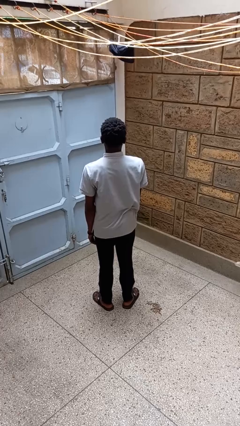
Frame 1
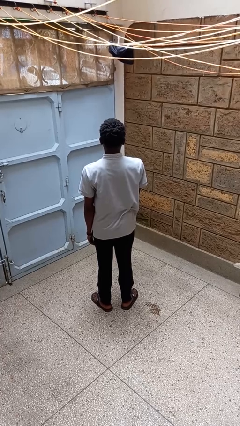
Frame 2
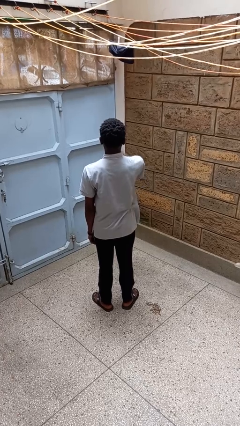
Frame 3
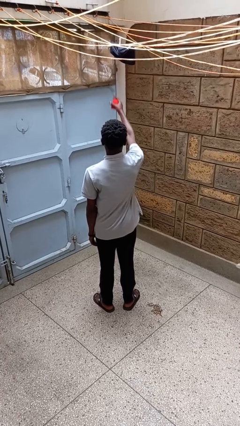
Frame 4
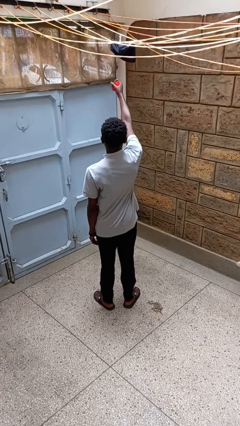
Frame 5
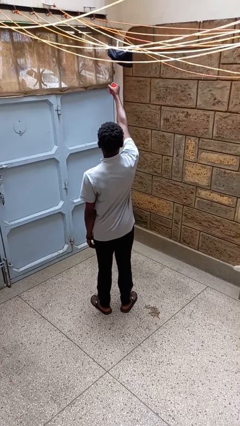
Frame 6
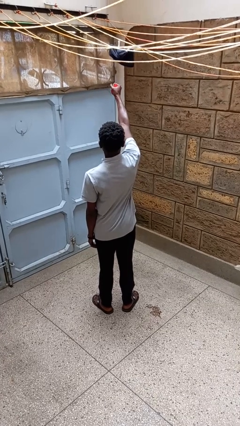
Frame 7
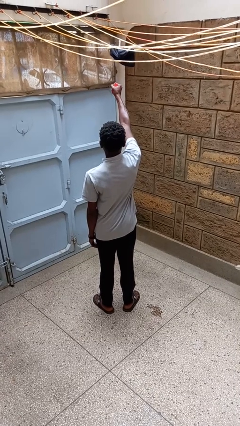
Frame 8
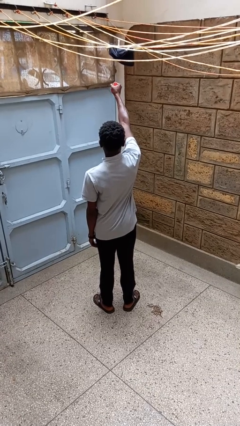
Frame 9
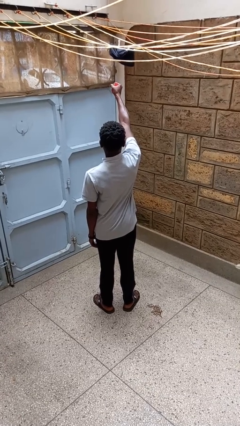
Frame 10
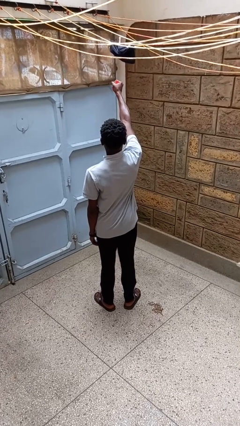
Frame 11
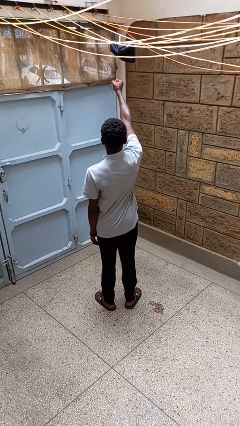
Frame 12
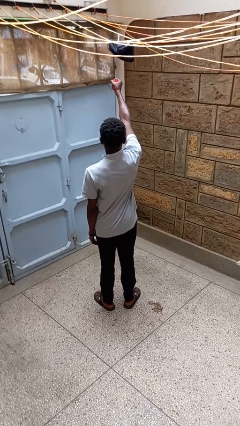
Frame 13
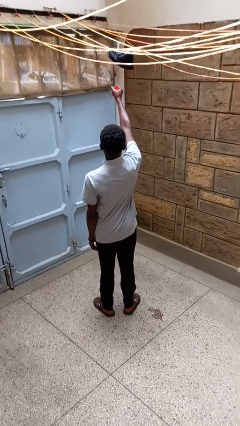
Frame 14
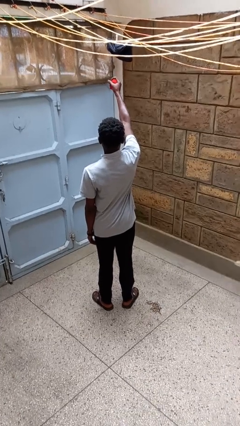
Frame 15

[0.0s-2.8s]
person squeezes object

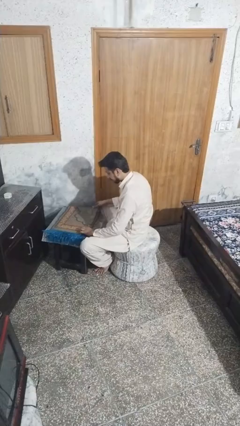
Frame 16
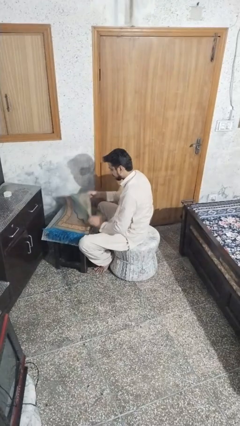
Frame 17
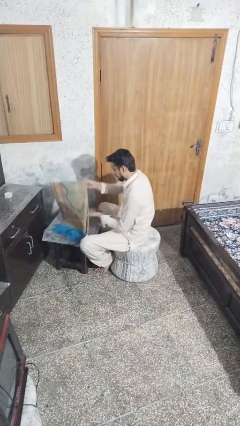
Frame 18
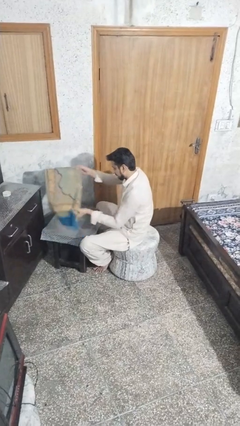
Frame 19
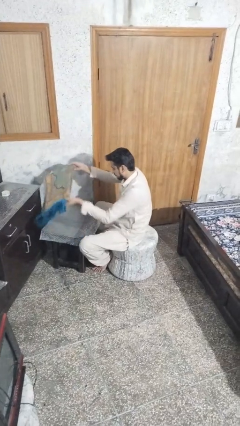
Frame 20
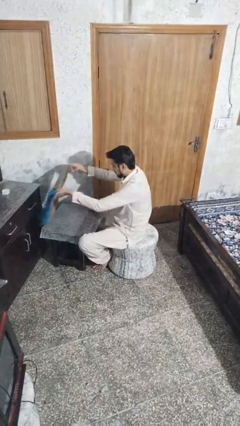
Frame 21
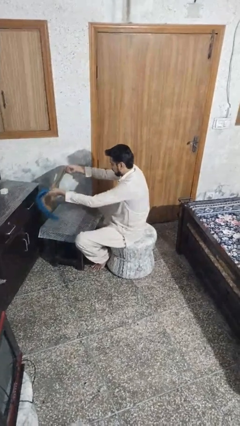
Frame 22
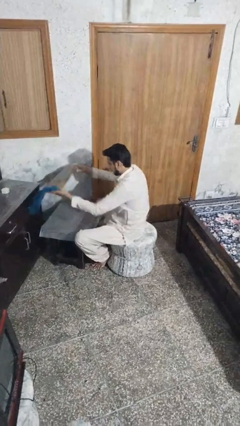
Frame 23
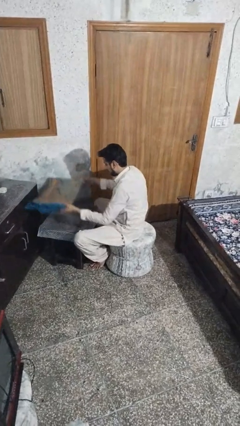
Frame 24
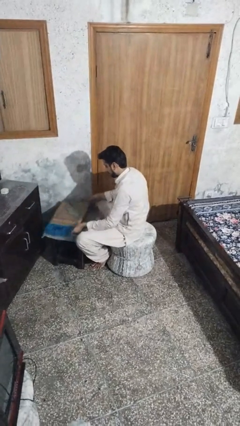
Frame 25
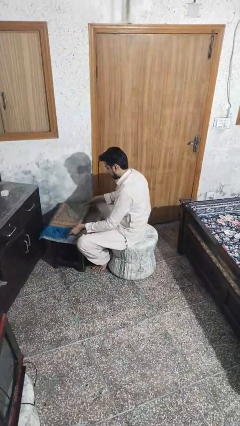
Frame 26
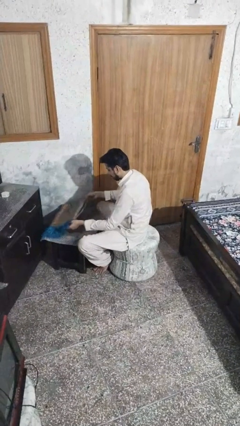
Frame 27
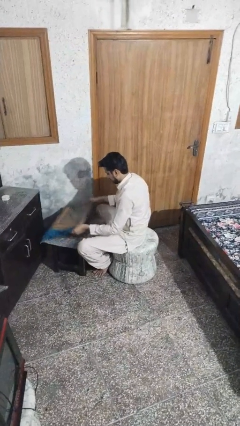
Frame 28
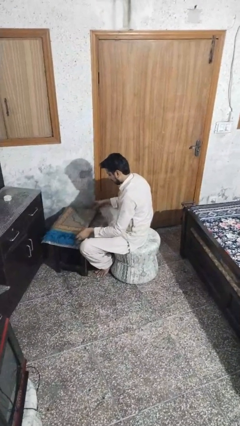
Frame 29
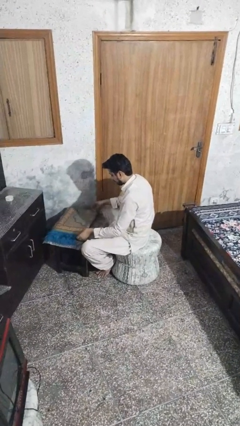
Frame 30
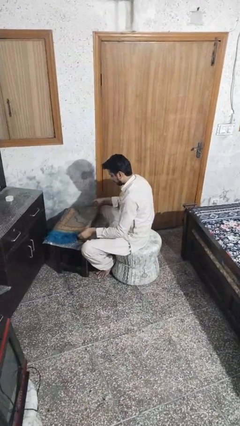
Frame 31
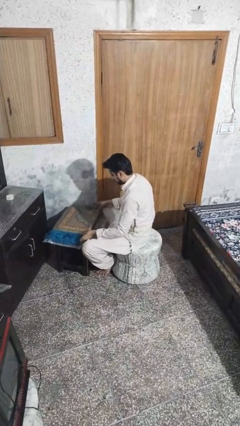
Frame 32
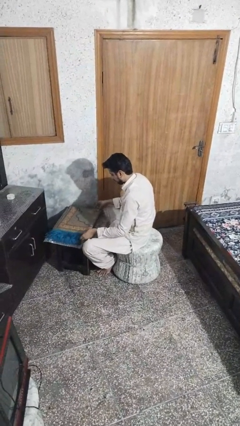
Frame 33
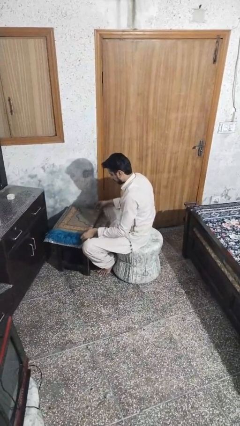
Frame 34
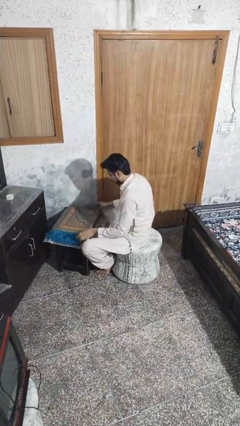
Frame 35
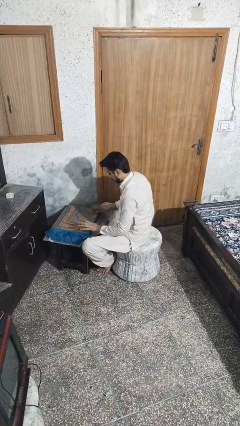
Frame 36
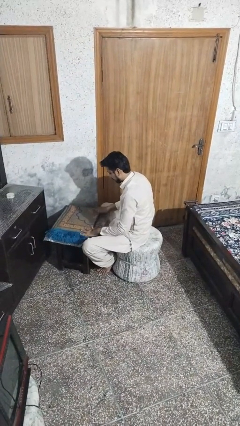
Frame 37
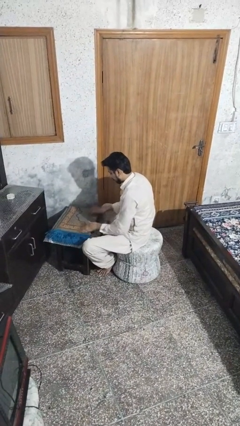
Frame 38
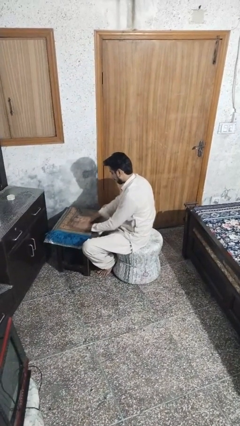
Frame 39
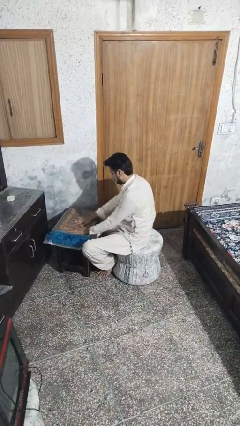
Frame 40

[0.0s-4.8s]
person spreads tablecloth

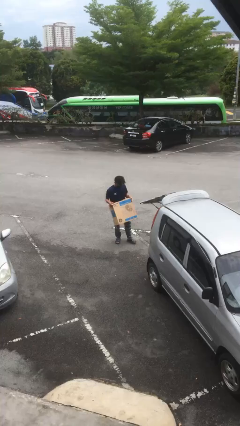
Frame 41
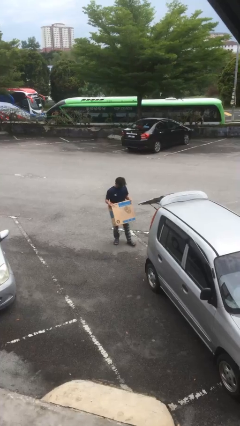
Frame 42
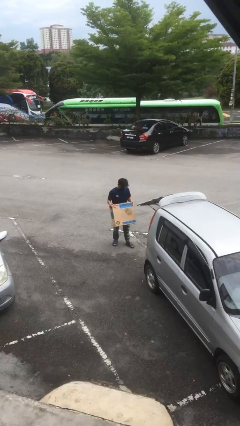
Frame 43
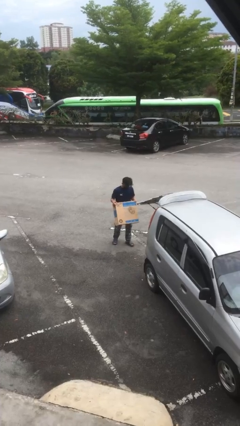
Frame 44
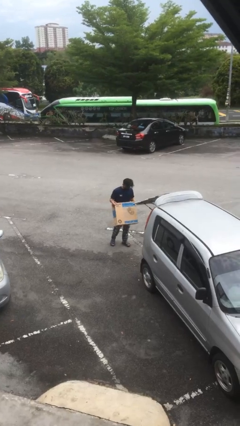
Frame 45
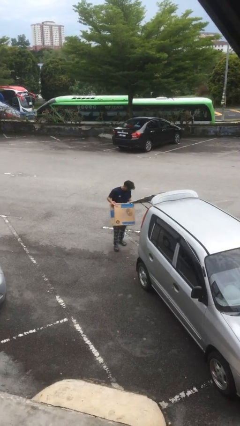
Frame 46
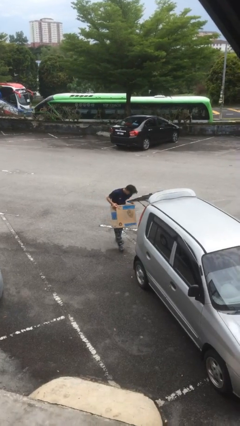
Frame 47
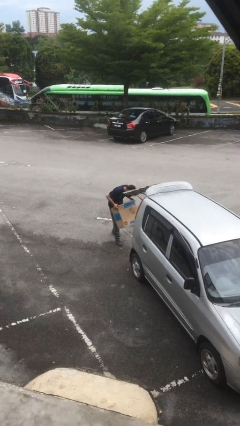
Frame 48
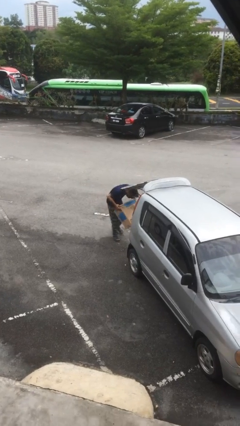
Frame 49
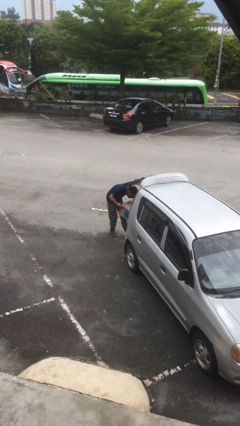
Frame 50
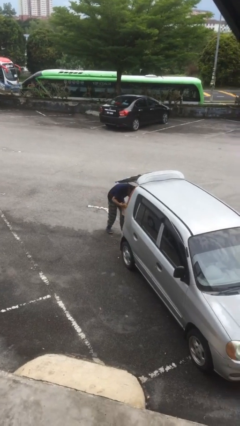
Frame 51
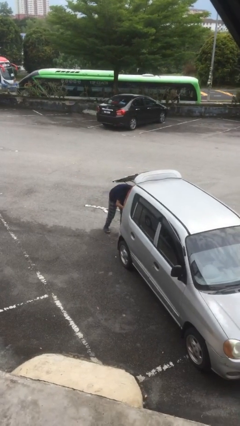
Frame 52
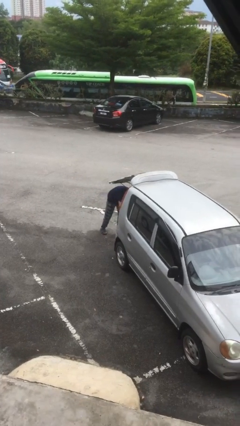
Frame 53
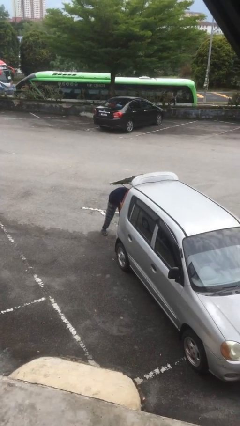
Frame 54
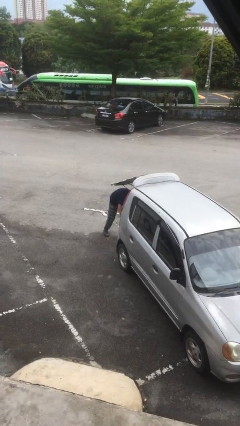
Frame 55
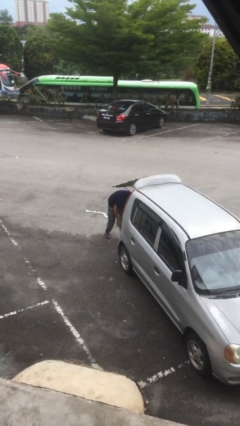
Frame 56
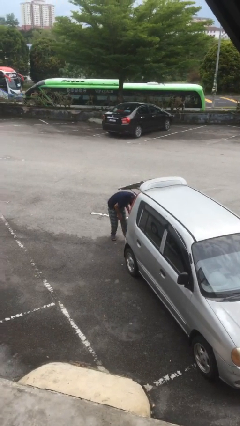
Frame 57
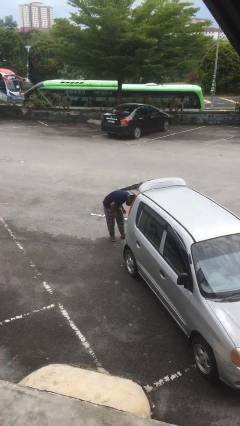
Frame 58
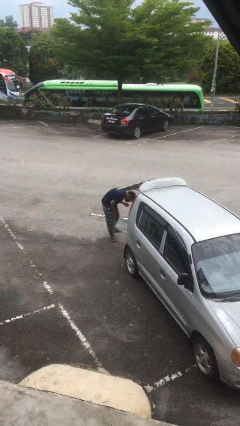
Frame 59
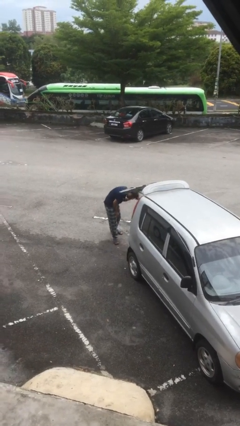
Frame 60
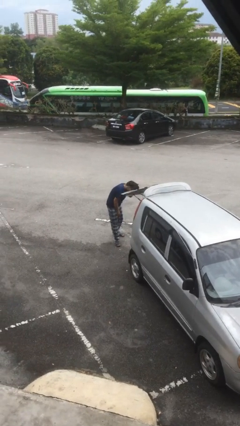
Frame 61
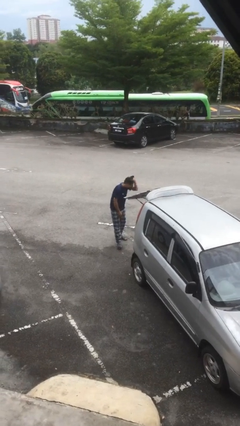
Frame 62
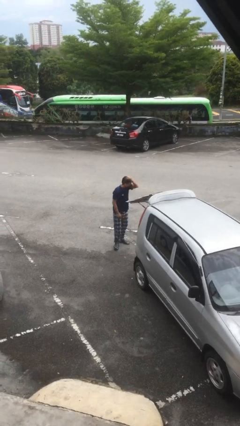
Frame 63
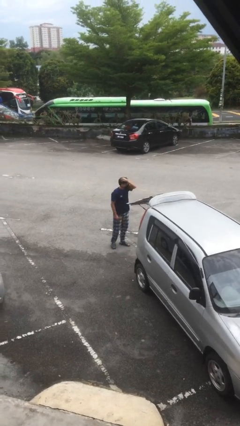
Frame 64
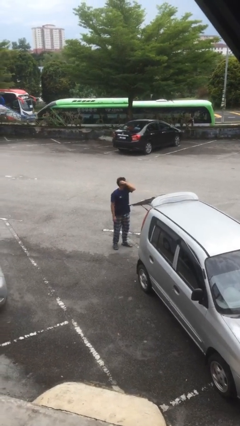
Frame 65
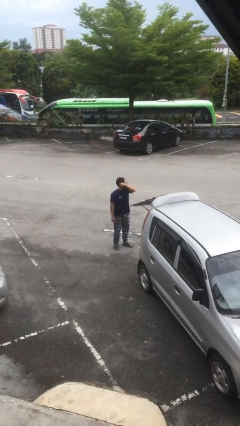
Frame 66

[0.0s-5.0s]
person loads car

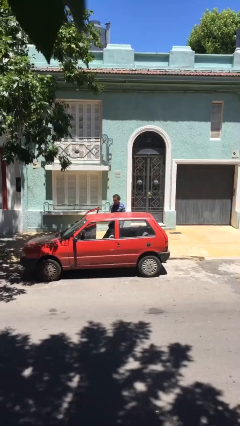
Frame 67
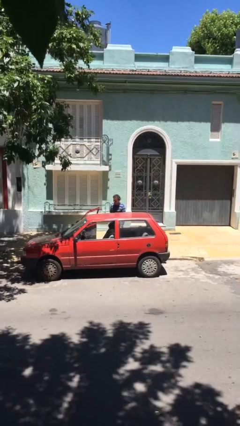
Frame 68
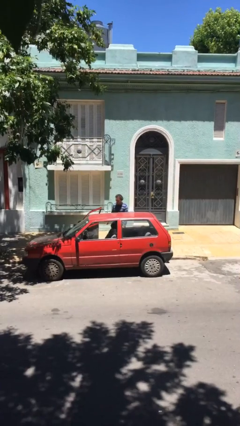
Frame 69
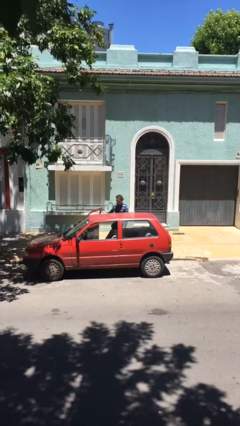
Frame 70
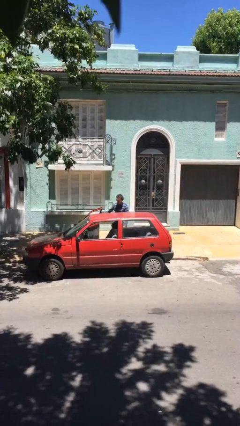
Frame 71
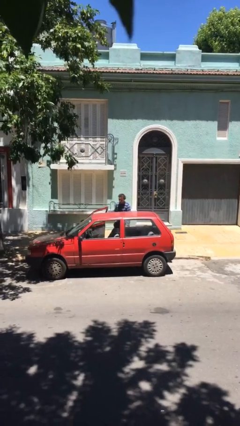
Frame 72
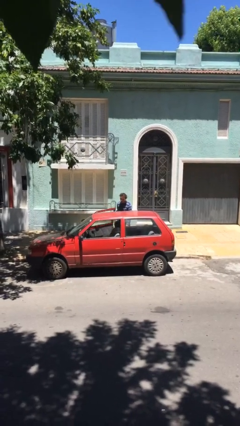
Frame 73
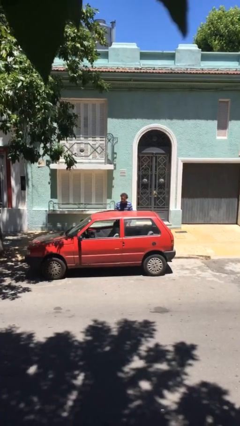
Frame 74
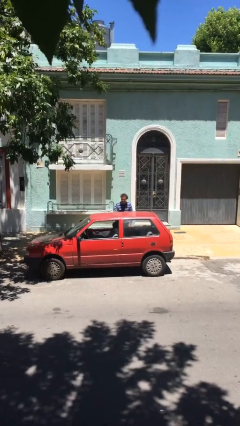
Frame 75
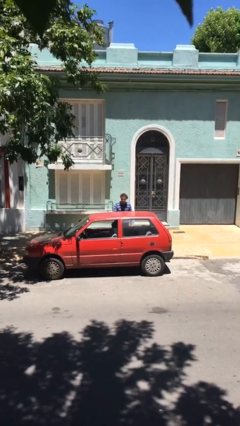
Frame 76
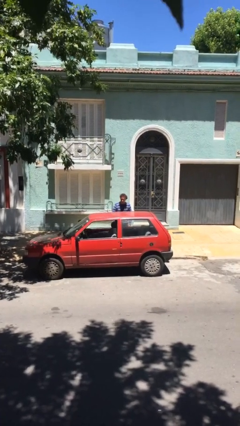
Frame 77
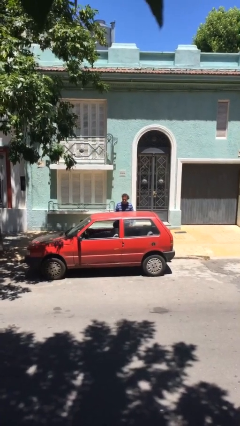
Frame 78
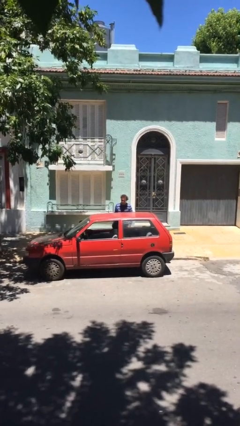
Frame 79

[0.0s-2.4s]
person closes car door

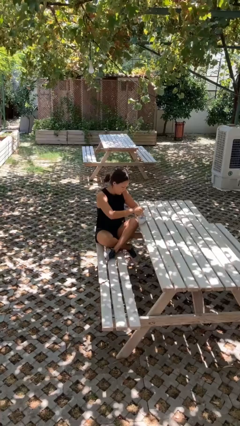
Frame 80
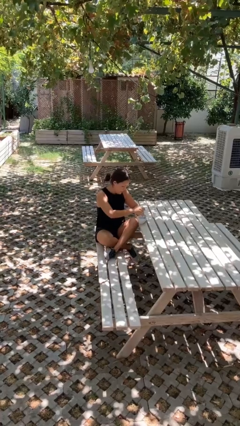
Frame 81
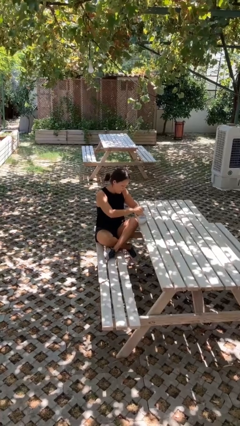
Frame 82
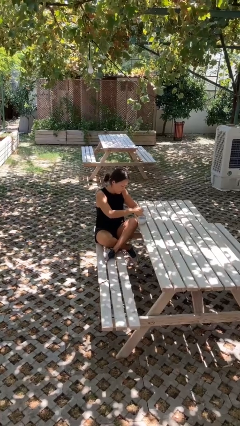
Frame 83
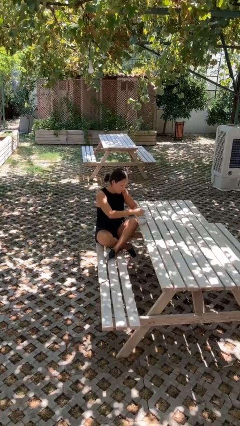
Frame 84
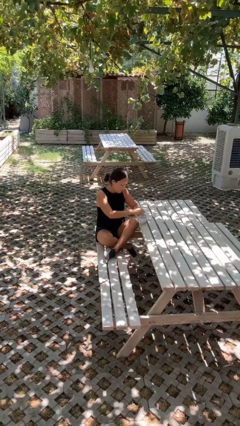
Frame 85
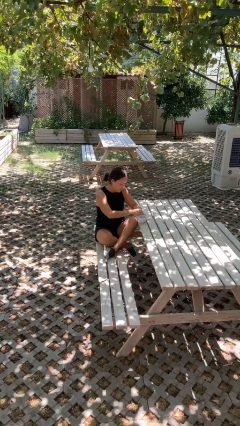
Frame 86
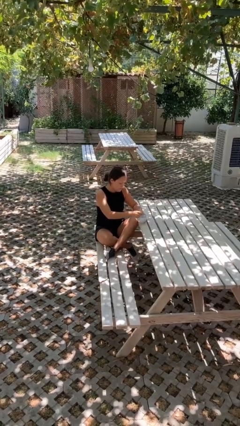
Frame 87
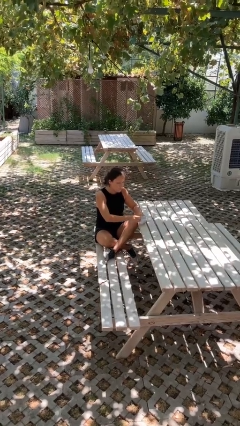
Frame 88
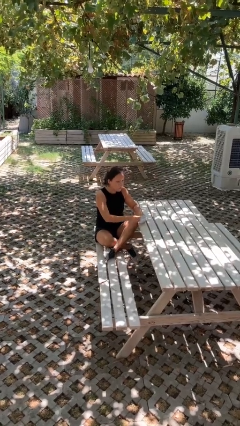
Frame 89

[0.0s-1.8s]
person stirs mug

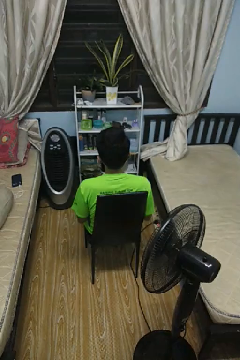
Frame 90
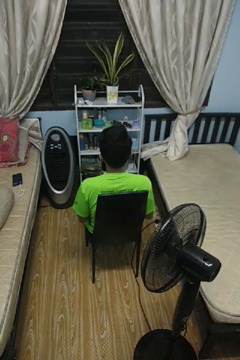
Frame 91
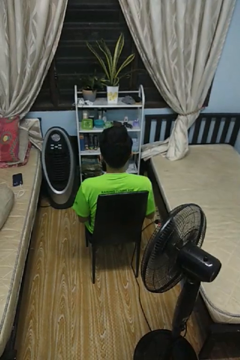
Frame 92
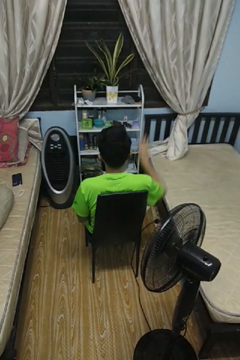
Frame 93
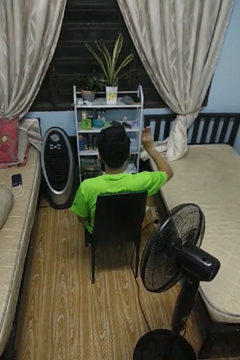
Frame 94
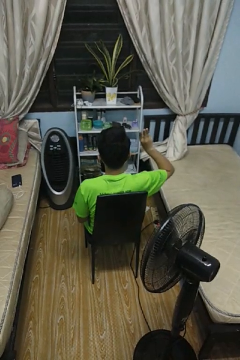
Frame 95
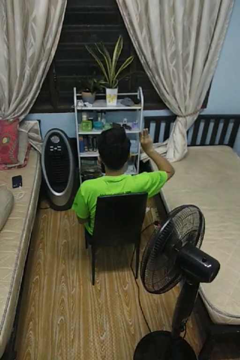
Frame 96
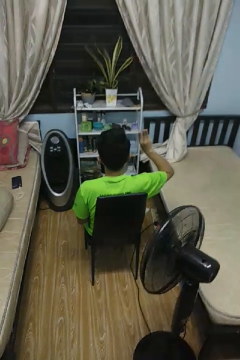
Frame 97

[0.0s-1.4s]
person gestures number three
